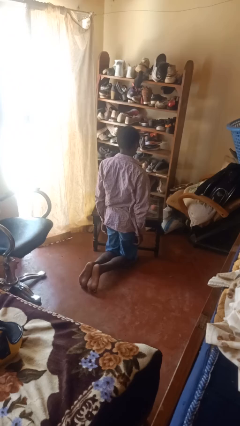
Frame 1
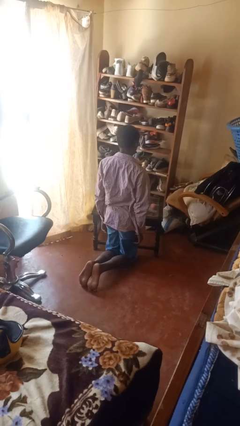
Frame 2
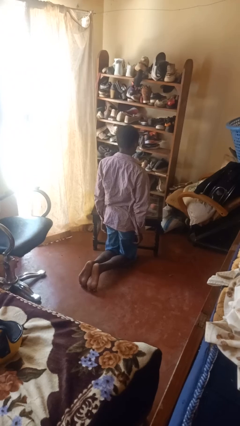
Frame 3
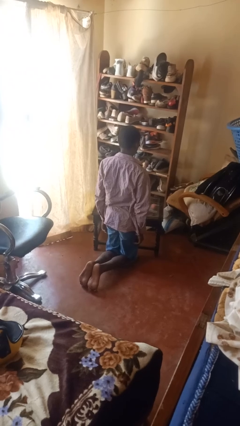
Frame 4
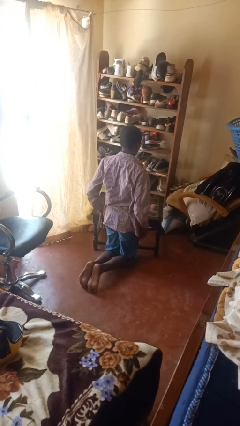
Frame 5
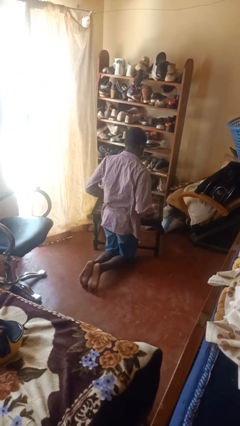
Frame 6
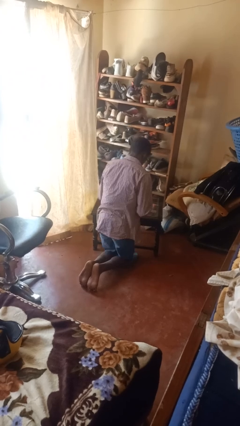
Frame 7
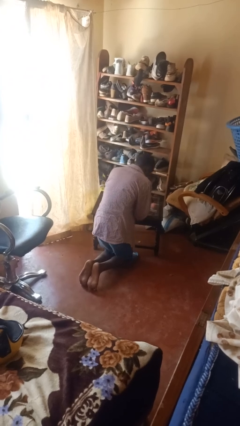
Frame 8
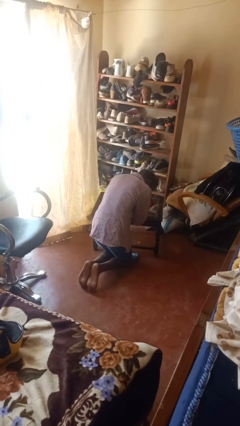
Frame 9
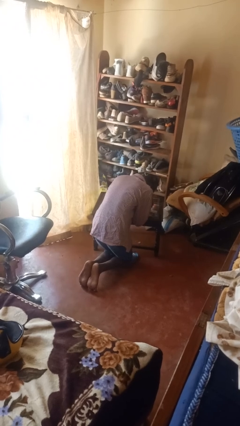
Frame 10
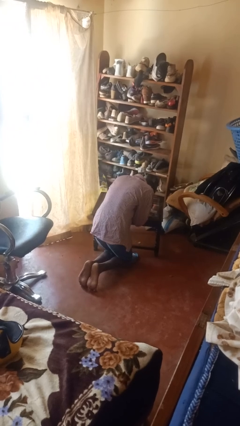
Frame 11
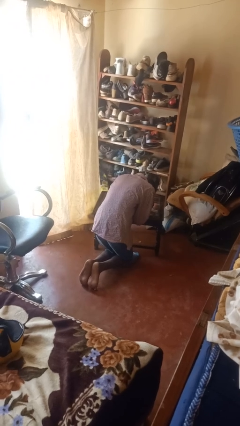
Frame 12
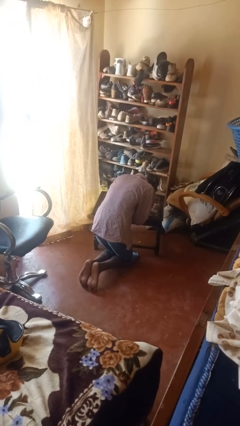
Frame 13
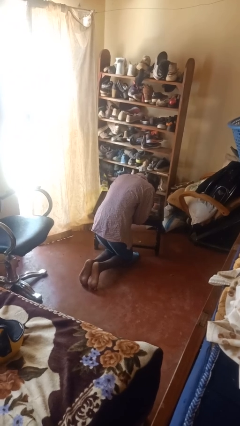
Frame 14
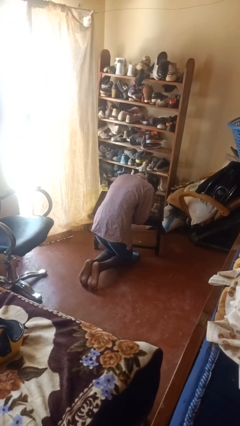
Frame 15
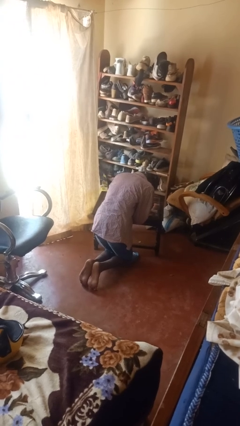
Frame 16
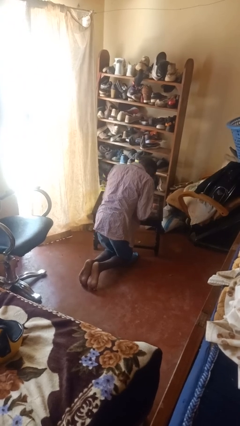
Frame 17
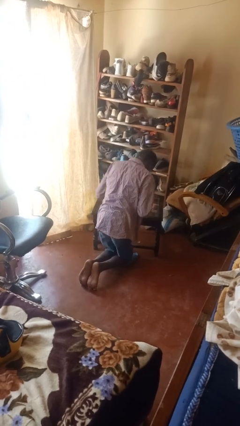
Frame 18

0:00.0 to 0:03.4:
person prays

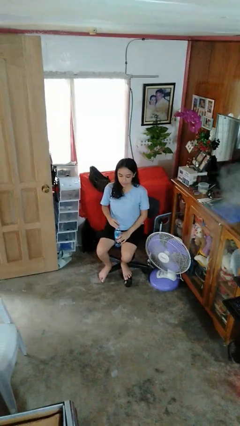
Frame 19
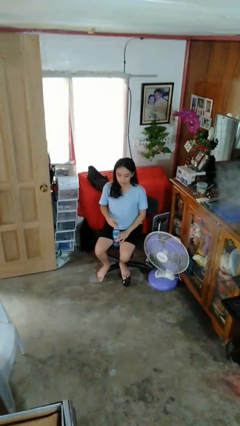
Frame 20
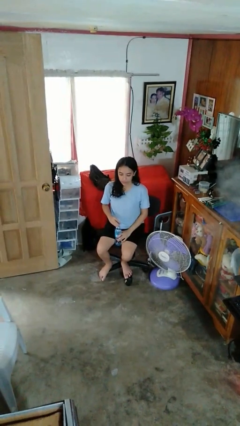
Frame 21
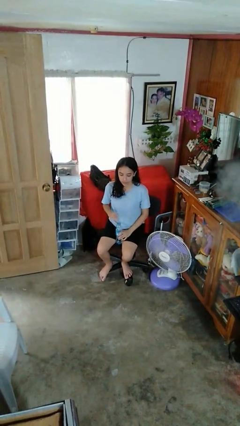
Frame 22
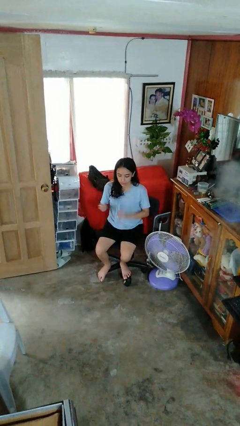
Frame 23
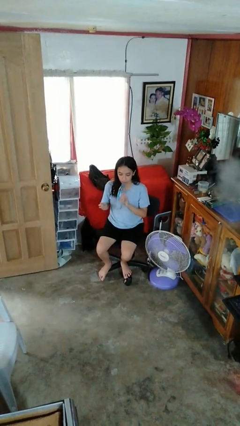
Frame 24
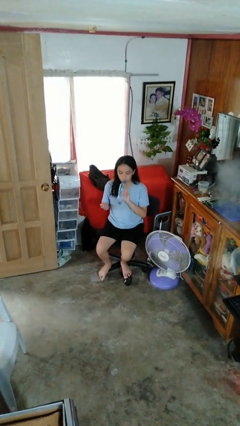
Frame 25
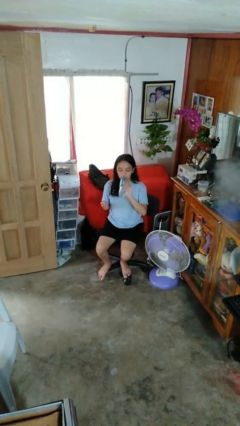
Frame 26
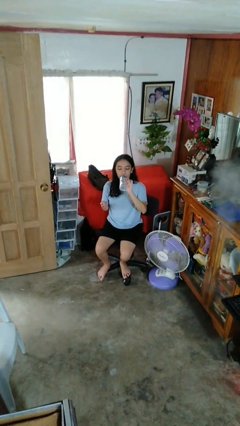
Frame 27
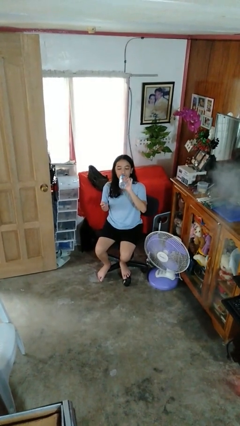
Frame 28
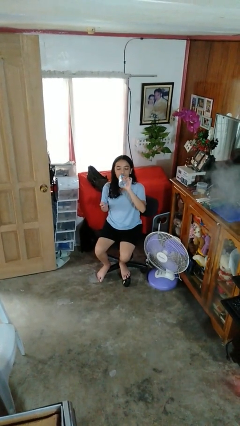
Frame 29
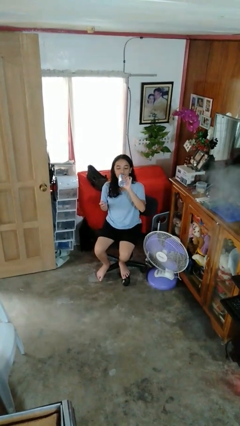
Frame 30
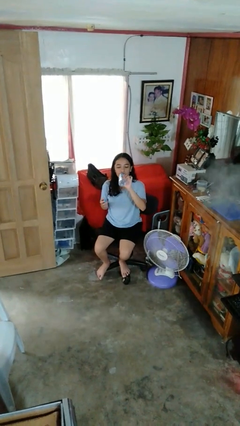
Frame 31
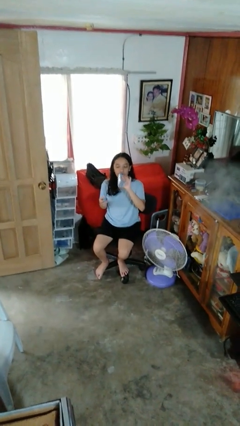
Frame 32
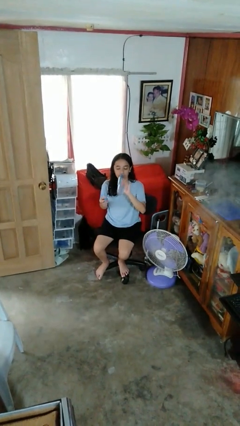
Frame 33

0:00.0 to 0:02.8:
person drinks from bottle

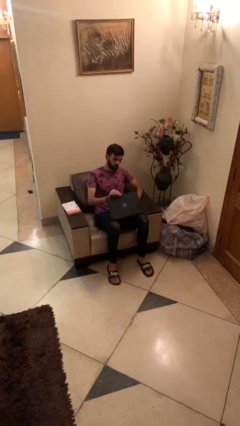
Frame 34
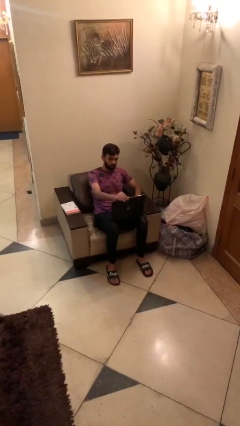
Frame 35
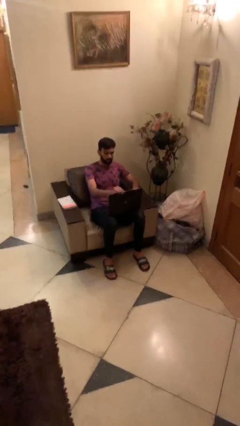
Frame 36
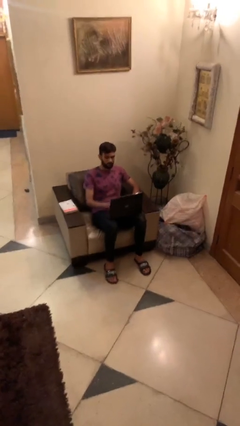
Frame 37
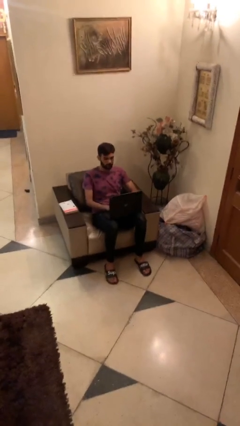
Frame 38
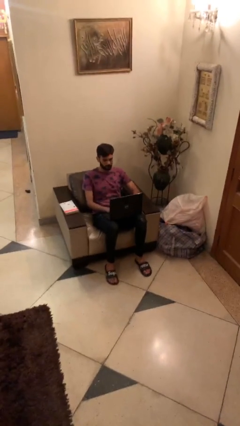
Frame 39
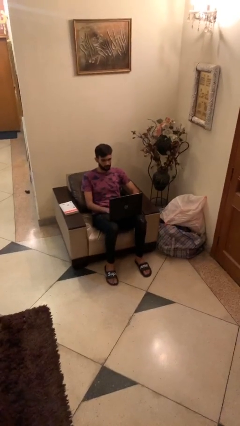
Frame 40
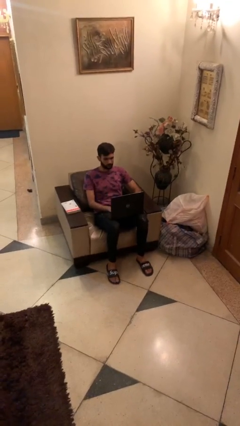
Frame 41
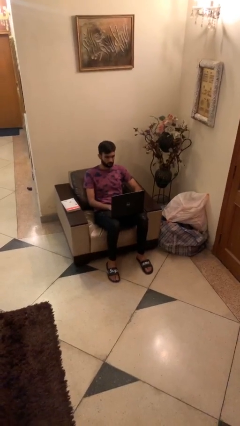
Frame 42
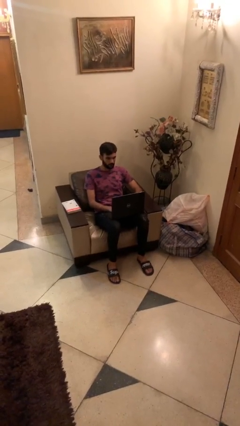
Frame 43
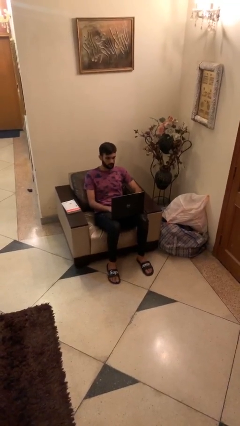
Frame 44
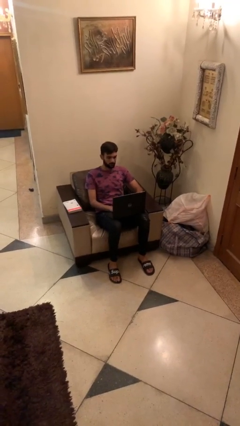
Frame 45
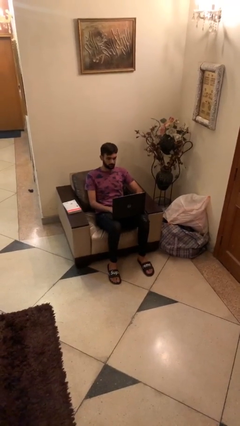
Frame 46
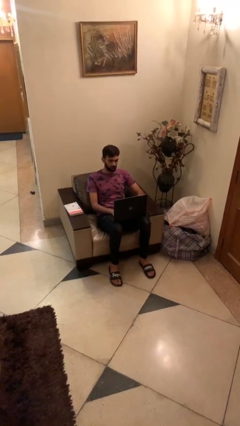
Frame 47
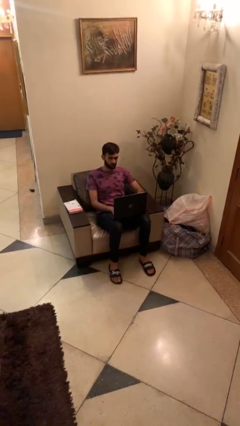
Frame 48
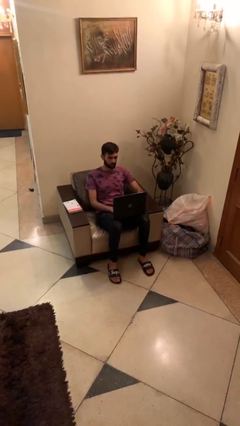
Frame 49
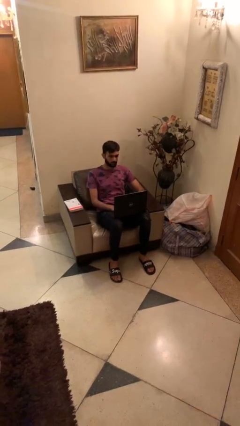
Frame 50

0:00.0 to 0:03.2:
person interacts with laptop

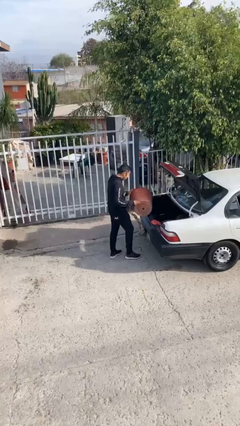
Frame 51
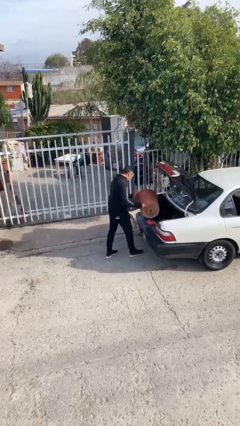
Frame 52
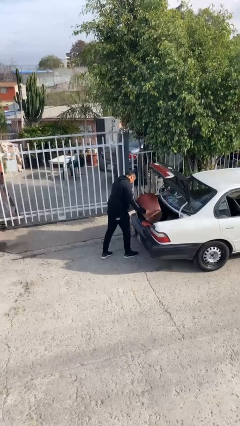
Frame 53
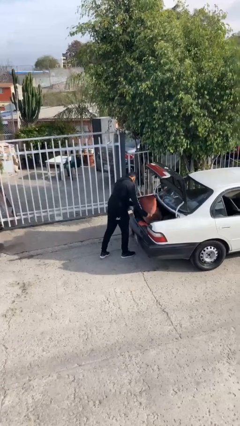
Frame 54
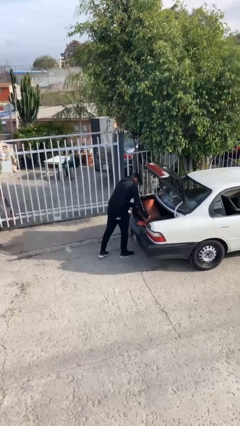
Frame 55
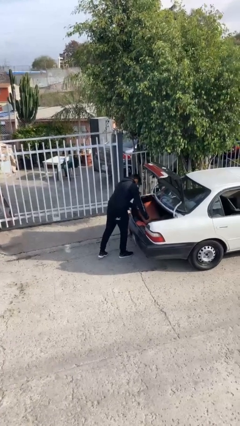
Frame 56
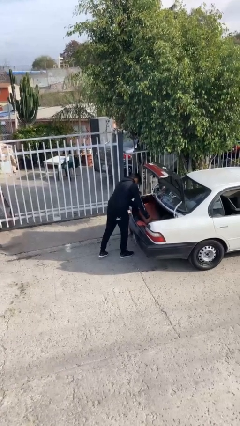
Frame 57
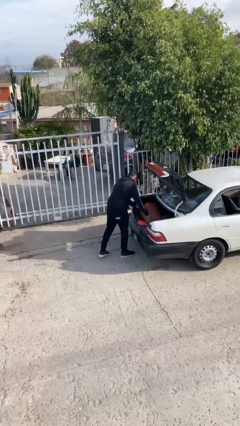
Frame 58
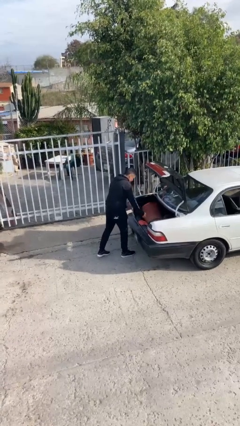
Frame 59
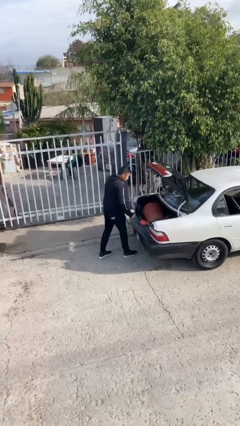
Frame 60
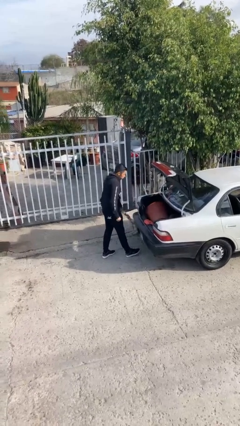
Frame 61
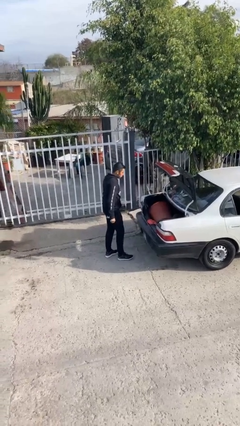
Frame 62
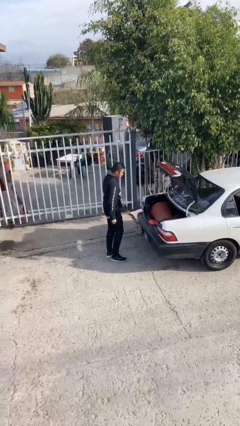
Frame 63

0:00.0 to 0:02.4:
person loads car

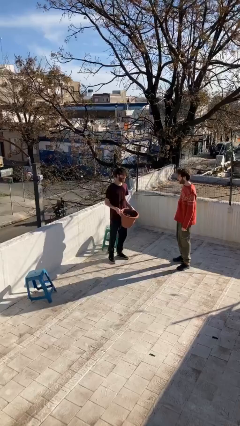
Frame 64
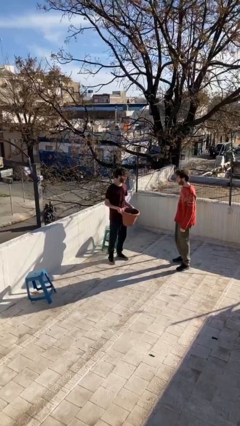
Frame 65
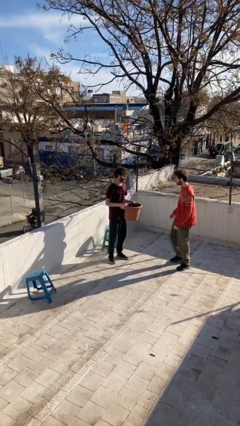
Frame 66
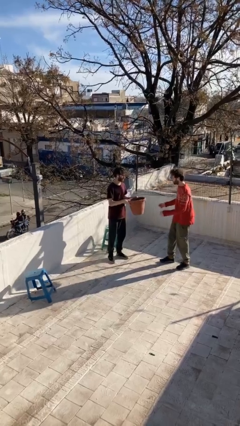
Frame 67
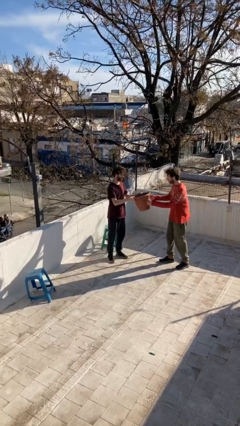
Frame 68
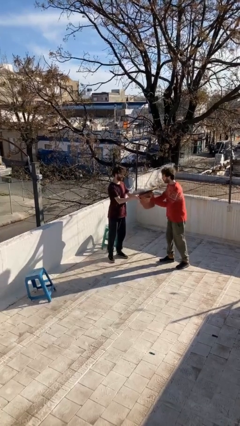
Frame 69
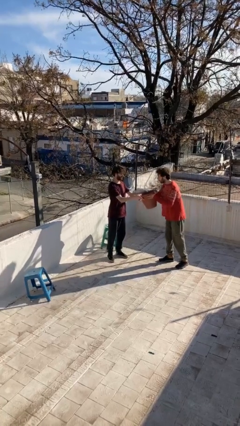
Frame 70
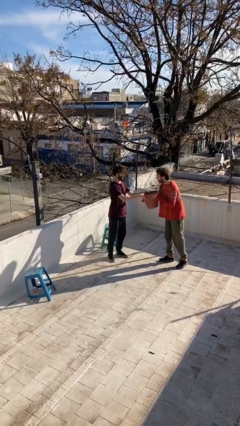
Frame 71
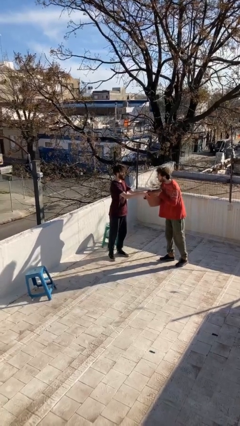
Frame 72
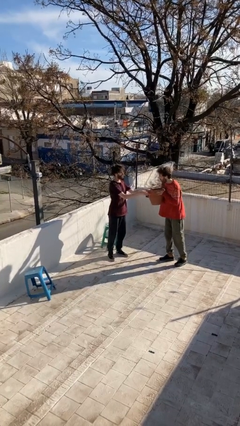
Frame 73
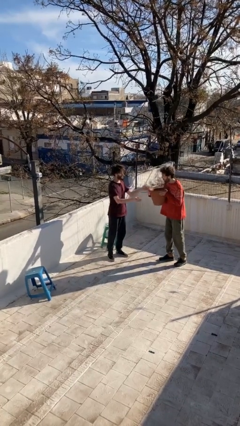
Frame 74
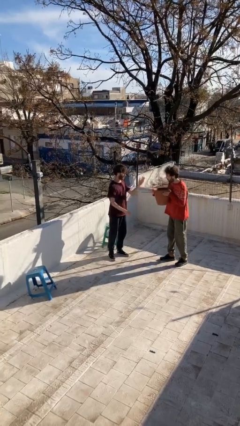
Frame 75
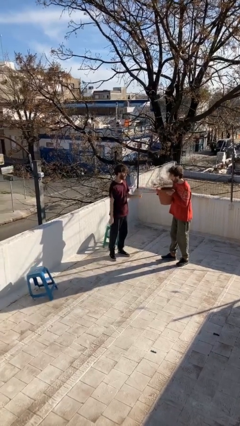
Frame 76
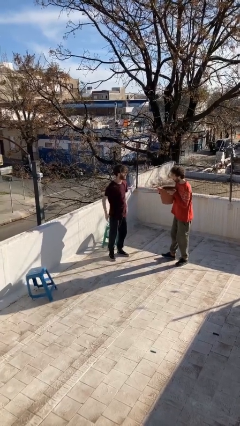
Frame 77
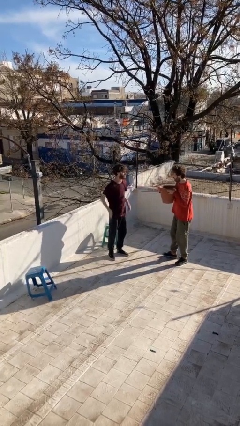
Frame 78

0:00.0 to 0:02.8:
person transfers object to person

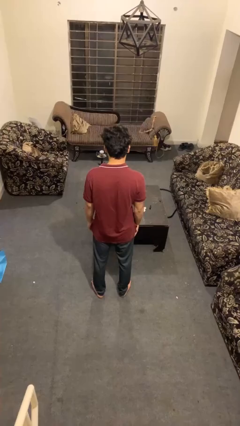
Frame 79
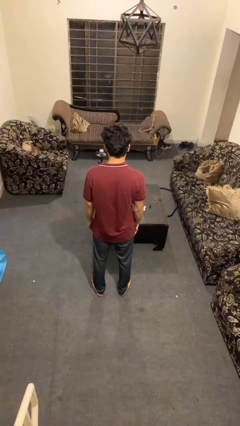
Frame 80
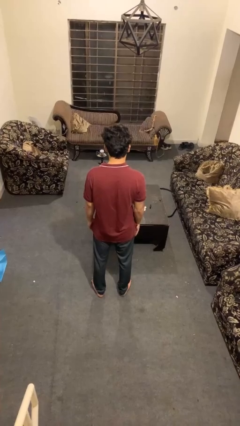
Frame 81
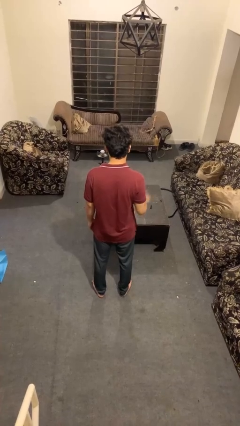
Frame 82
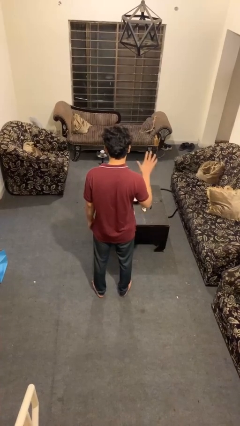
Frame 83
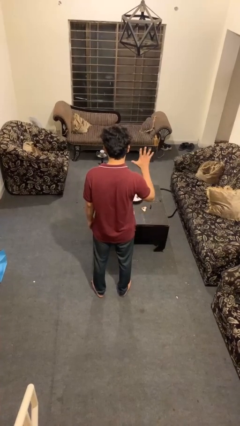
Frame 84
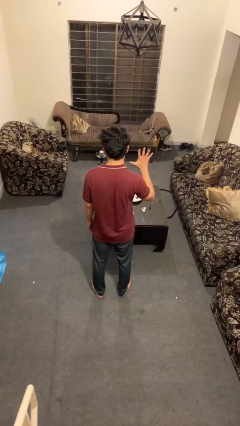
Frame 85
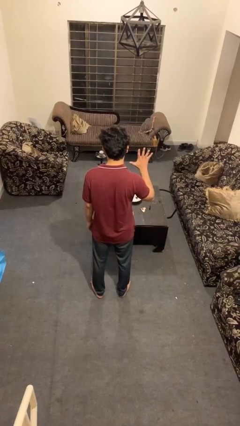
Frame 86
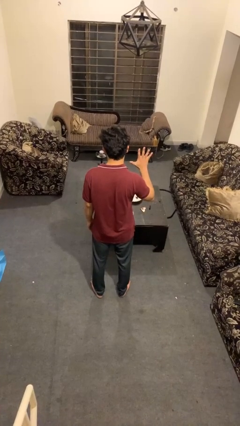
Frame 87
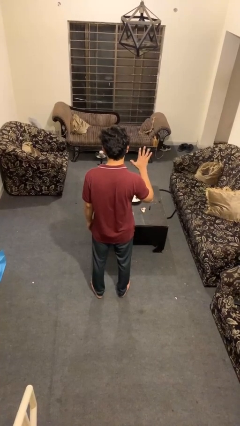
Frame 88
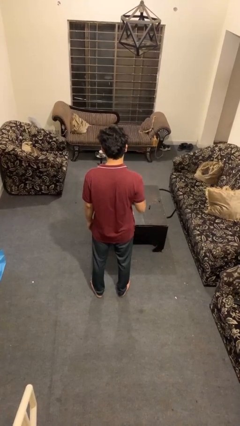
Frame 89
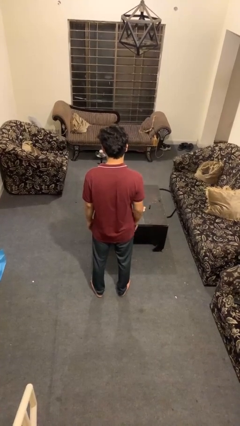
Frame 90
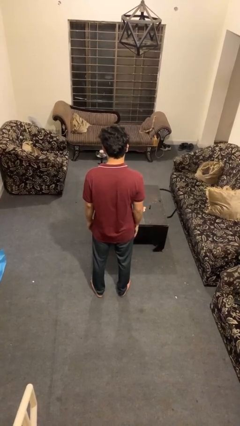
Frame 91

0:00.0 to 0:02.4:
person gestures number five

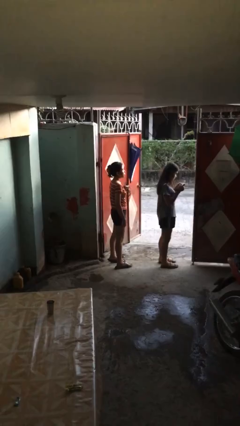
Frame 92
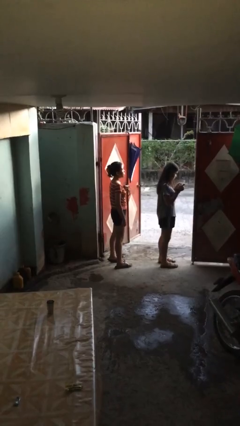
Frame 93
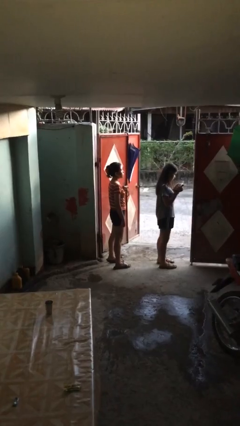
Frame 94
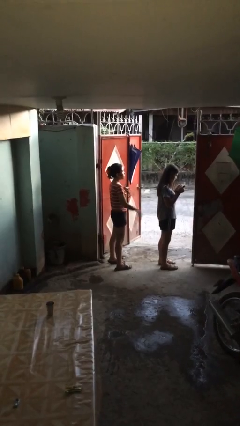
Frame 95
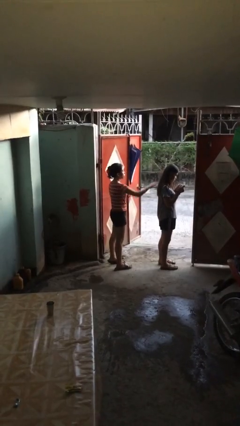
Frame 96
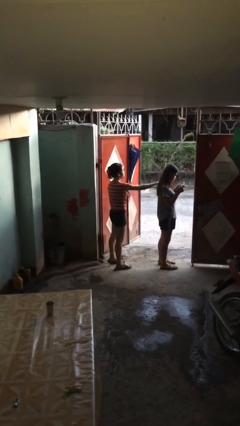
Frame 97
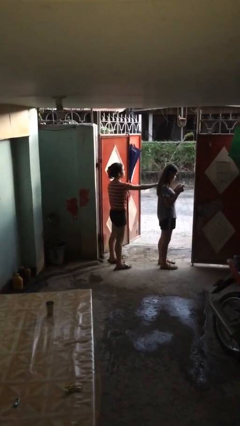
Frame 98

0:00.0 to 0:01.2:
person grabs person by shoulder
